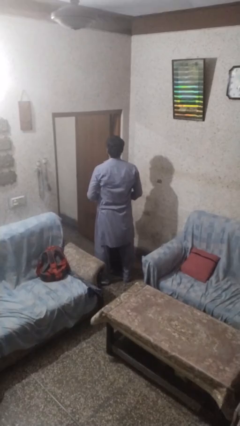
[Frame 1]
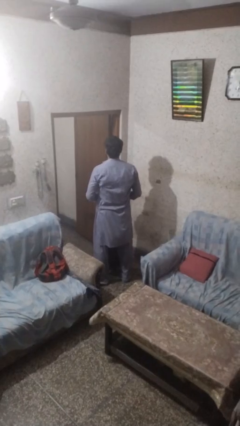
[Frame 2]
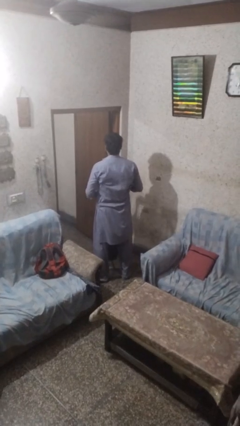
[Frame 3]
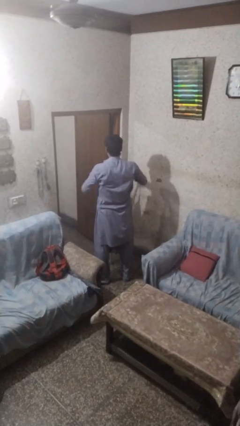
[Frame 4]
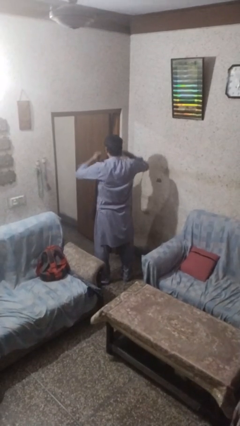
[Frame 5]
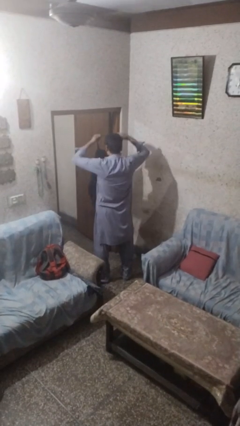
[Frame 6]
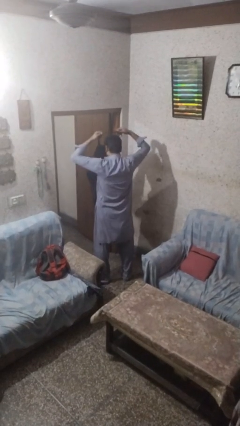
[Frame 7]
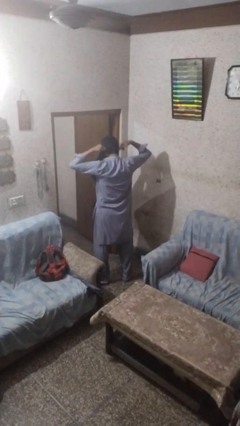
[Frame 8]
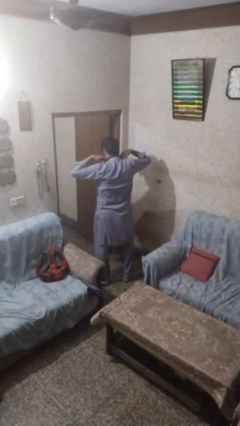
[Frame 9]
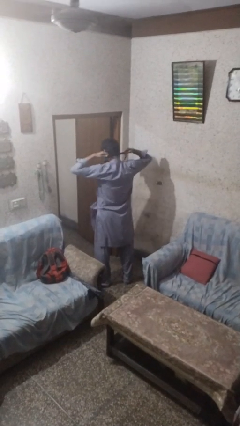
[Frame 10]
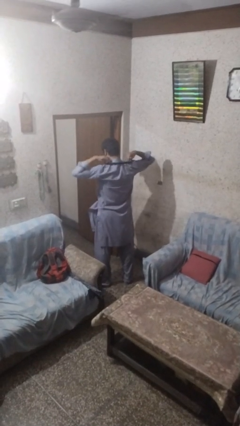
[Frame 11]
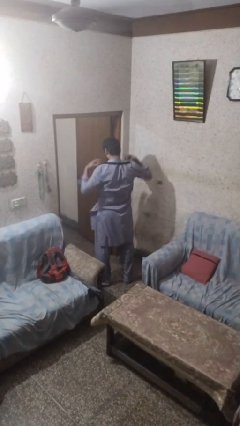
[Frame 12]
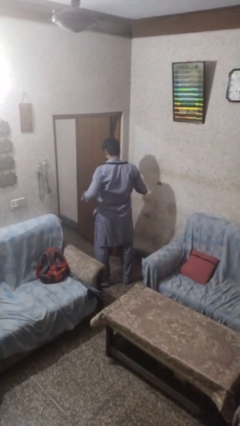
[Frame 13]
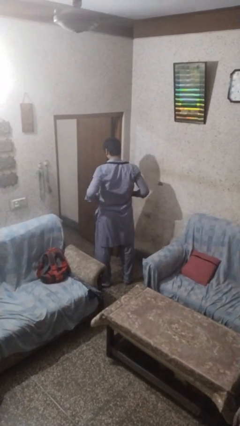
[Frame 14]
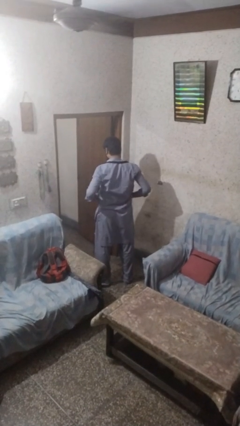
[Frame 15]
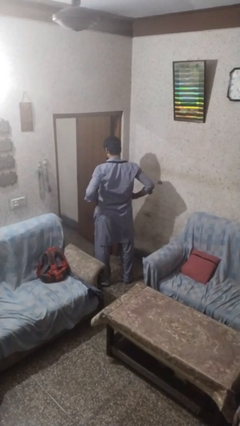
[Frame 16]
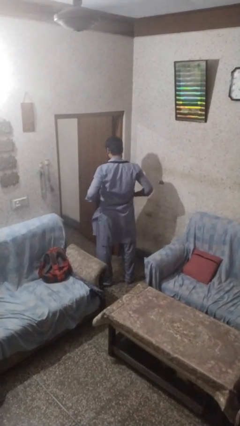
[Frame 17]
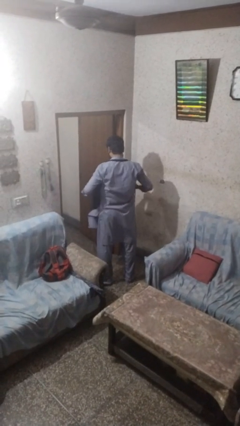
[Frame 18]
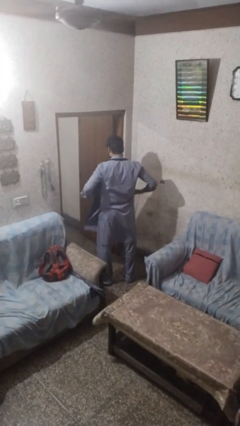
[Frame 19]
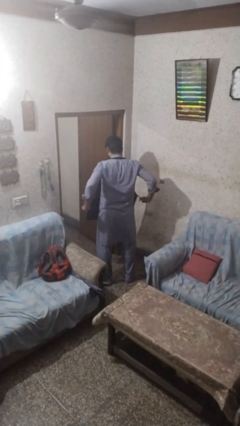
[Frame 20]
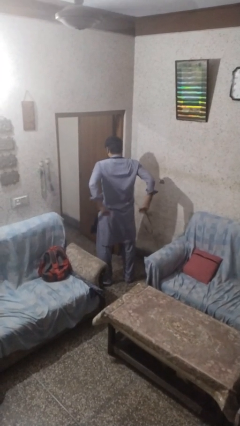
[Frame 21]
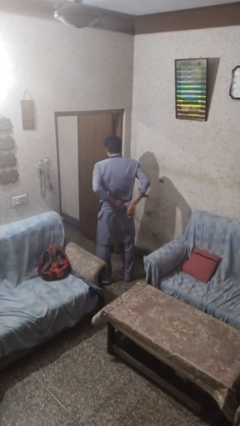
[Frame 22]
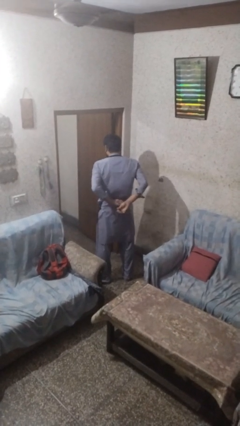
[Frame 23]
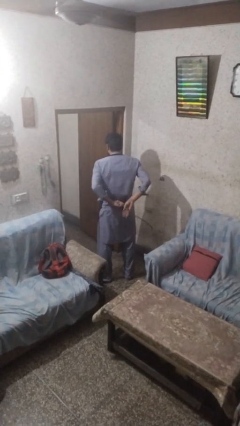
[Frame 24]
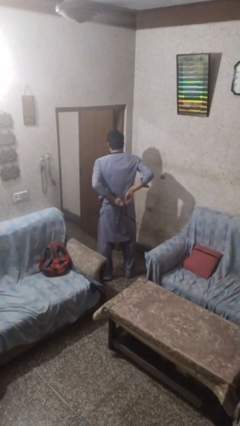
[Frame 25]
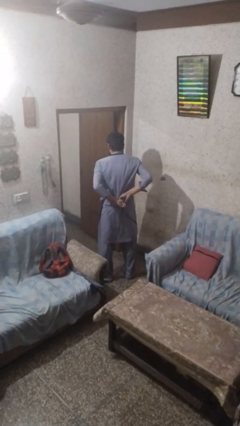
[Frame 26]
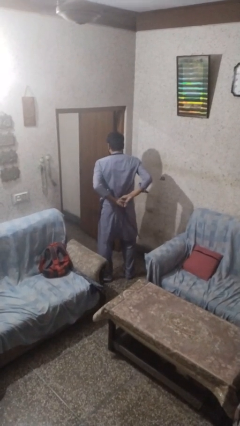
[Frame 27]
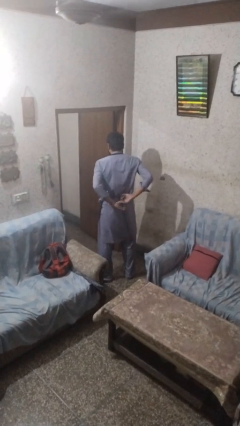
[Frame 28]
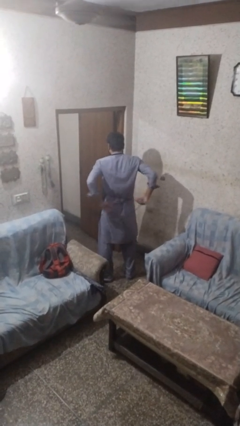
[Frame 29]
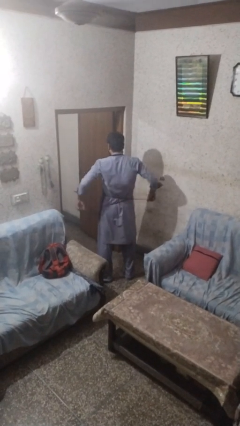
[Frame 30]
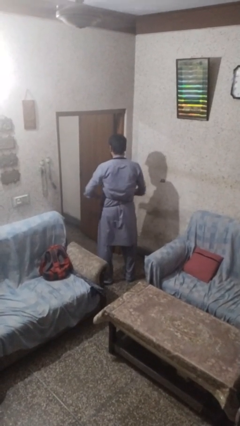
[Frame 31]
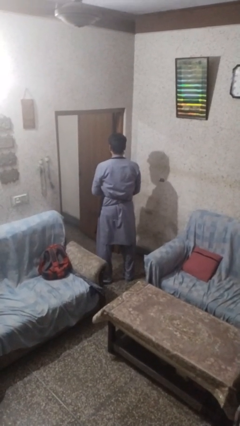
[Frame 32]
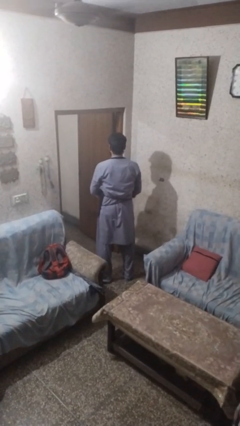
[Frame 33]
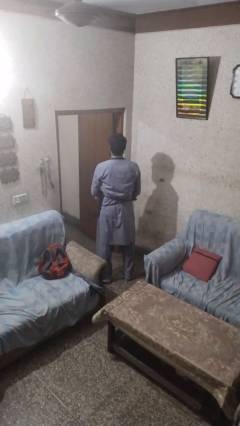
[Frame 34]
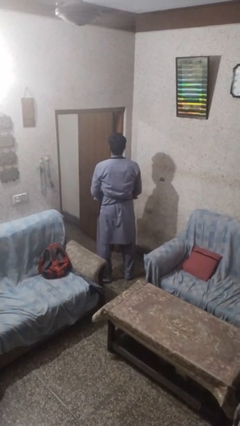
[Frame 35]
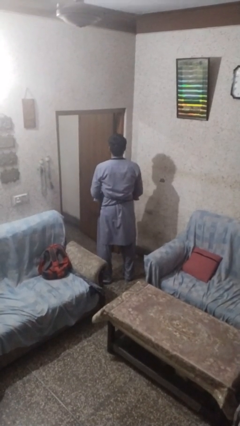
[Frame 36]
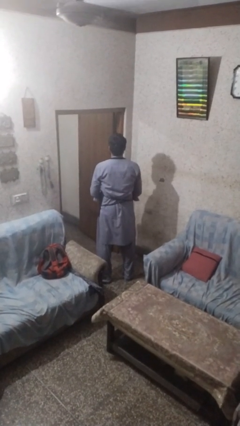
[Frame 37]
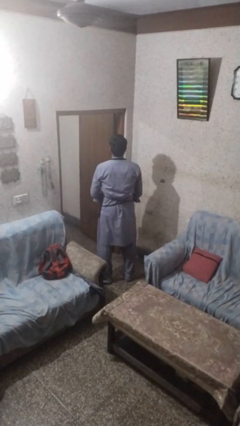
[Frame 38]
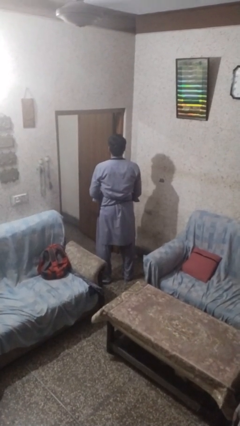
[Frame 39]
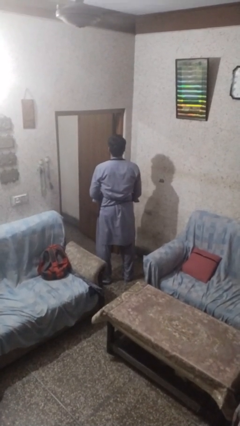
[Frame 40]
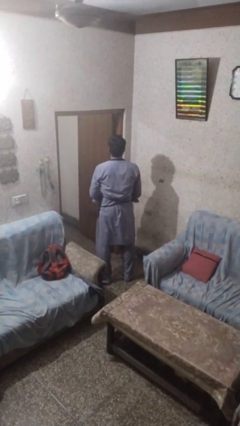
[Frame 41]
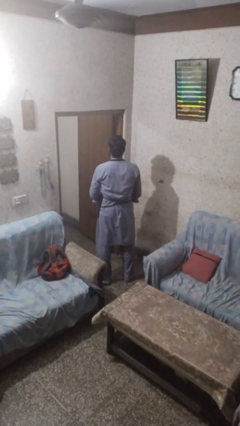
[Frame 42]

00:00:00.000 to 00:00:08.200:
person puts on apron

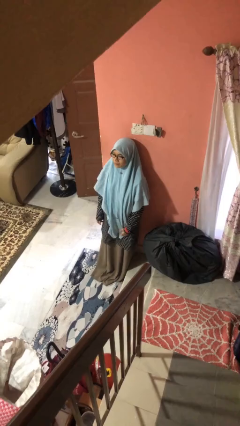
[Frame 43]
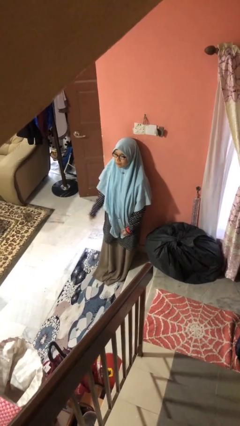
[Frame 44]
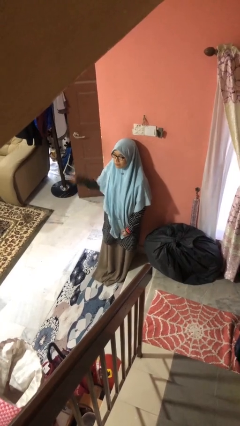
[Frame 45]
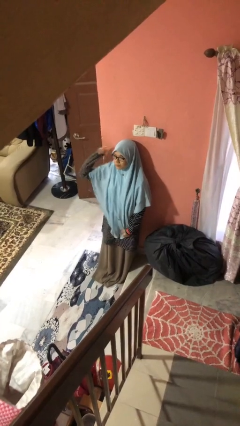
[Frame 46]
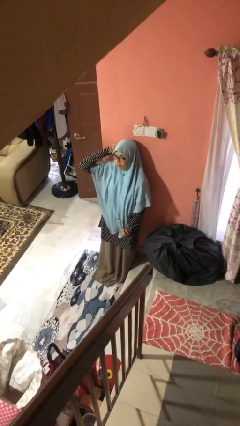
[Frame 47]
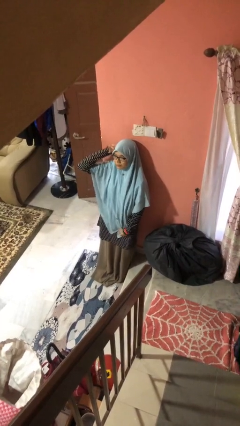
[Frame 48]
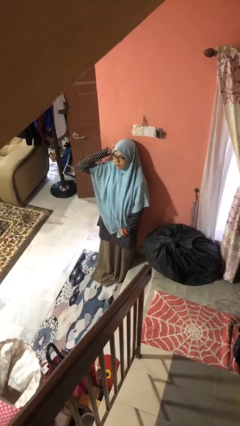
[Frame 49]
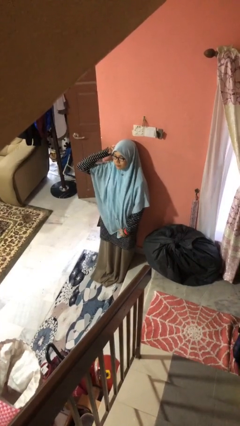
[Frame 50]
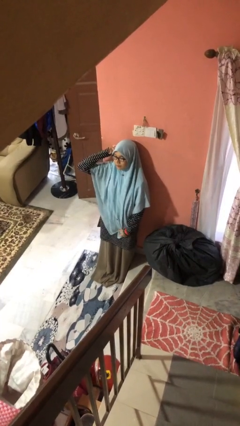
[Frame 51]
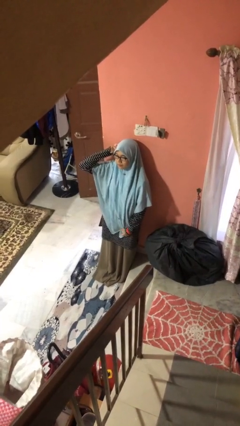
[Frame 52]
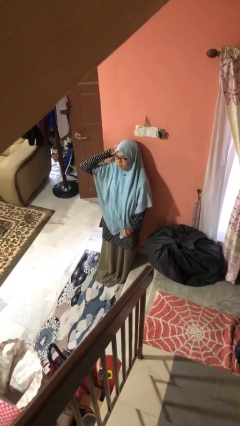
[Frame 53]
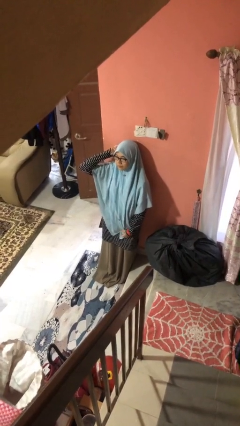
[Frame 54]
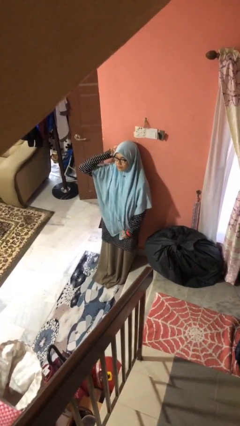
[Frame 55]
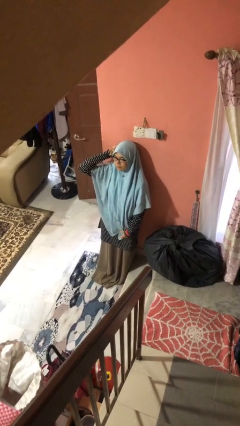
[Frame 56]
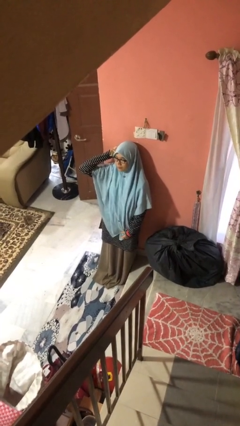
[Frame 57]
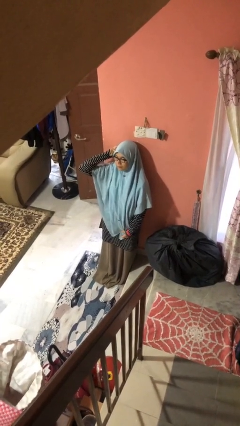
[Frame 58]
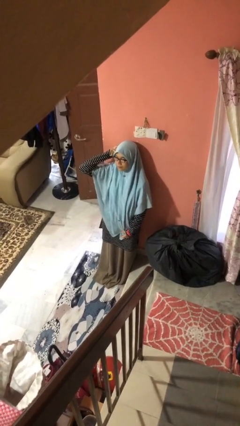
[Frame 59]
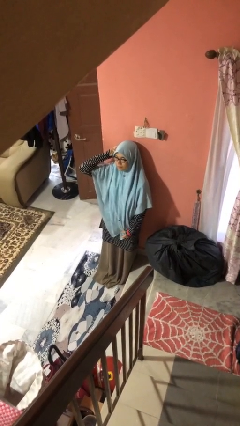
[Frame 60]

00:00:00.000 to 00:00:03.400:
person scratches face

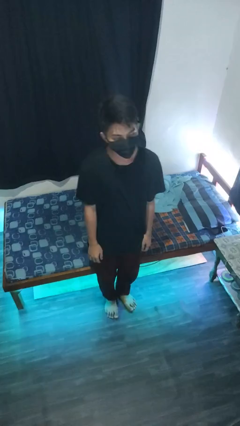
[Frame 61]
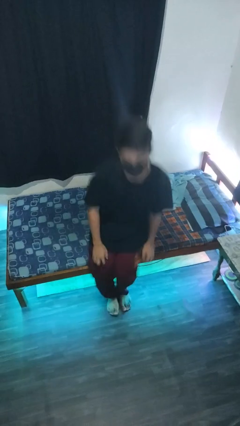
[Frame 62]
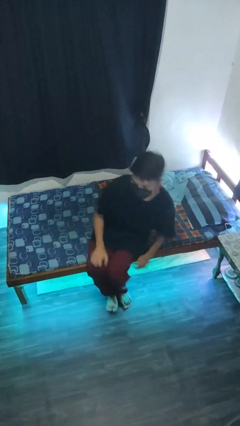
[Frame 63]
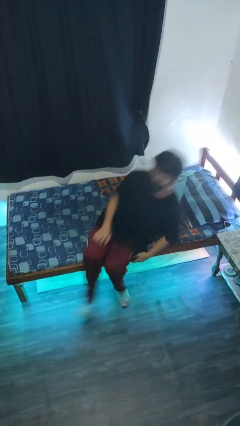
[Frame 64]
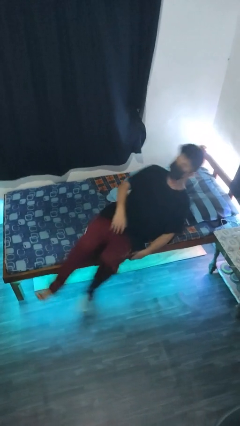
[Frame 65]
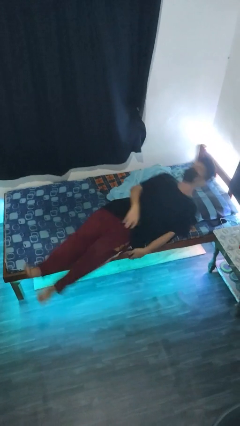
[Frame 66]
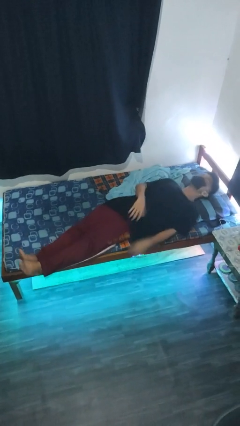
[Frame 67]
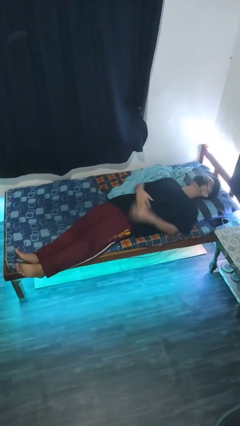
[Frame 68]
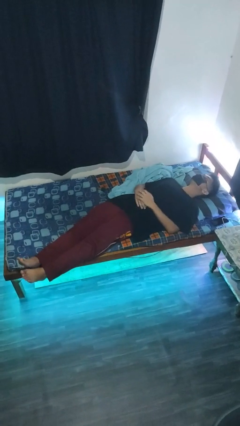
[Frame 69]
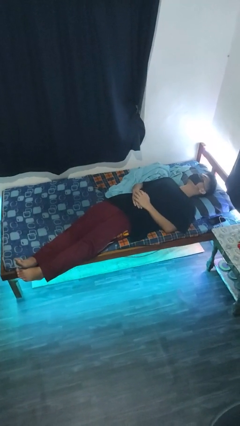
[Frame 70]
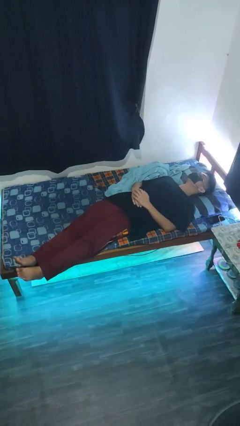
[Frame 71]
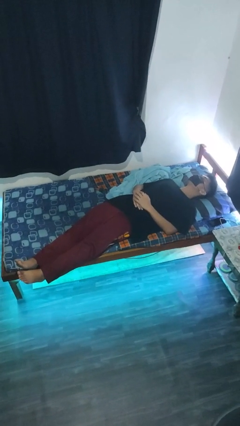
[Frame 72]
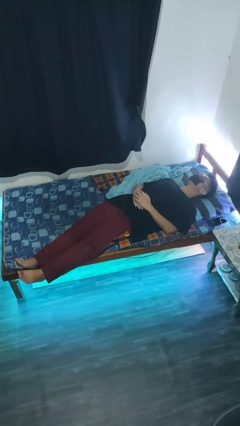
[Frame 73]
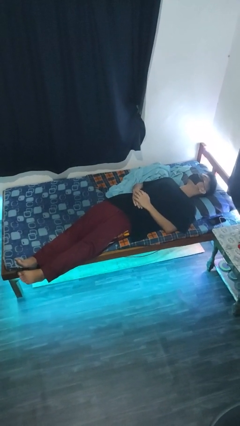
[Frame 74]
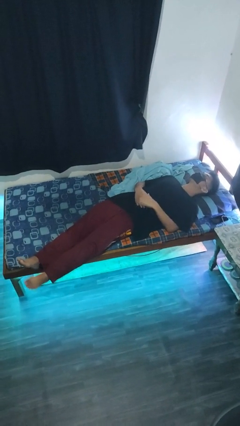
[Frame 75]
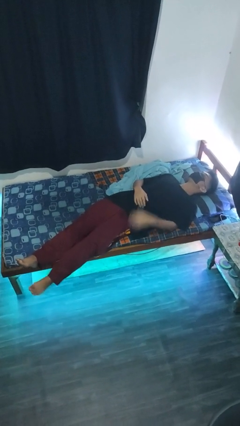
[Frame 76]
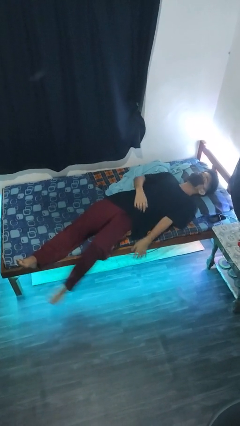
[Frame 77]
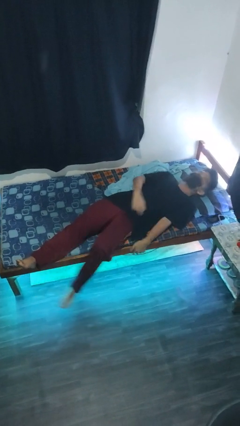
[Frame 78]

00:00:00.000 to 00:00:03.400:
person lies down on bed

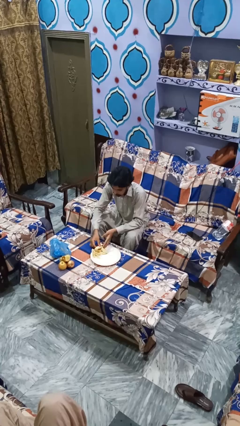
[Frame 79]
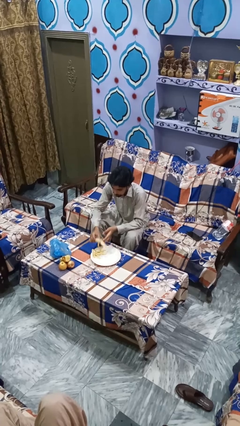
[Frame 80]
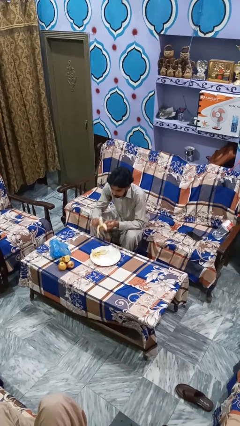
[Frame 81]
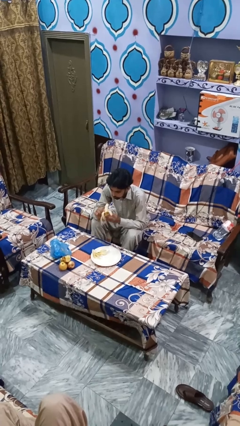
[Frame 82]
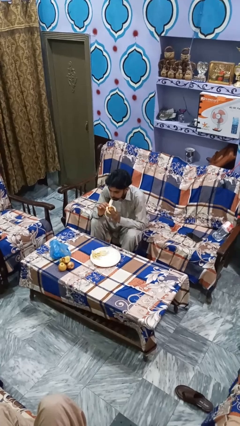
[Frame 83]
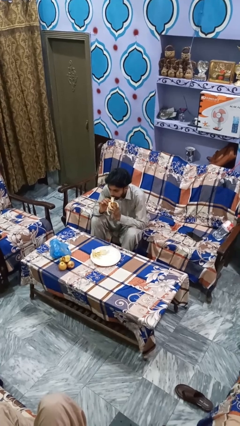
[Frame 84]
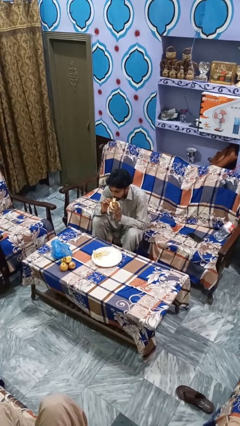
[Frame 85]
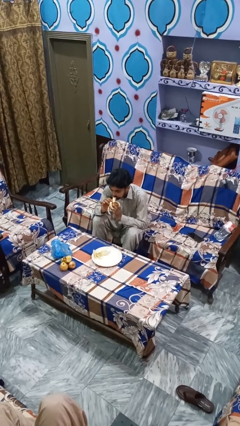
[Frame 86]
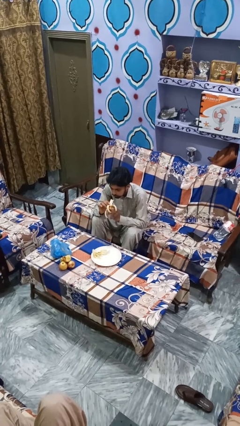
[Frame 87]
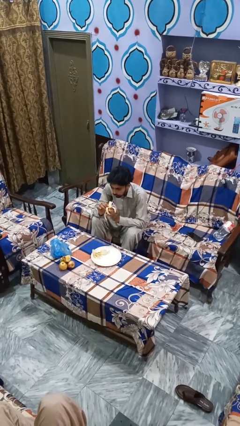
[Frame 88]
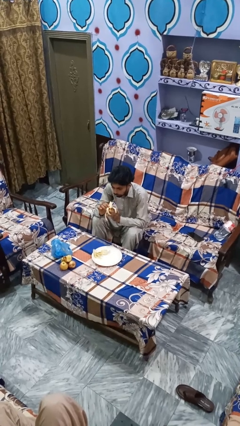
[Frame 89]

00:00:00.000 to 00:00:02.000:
person eats banana
